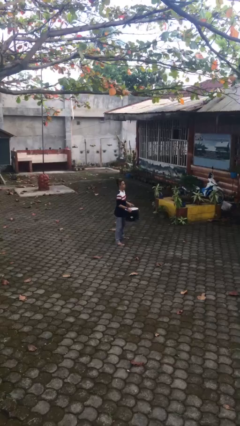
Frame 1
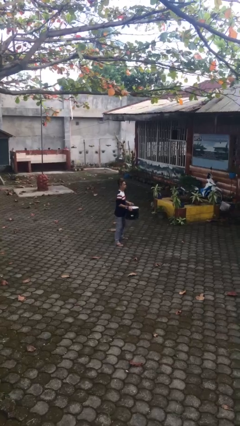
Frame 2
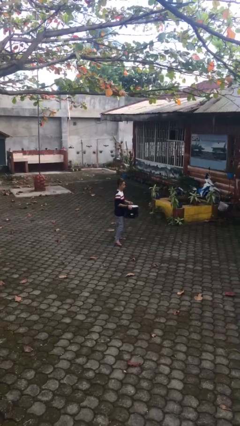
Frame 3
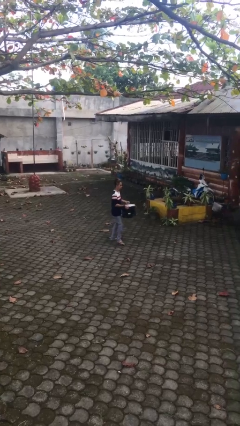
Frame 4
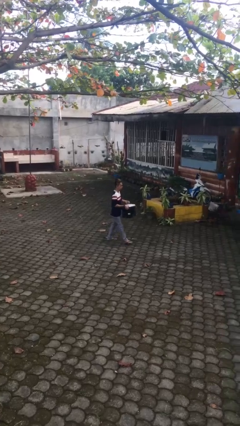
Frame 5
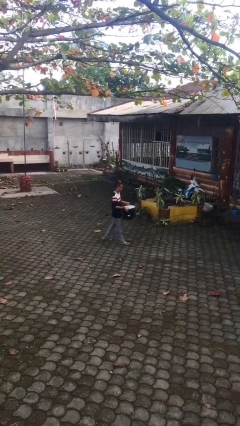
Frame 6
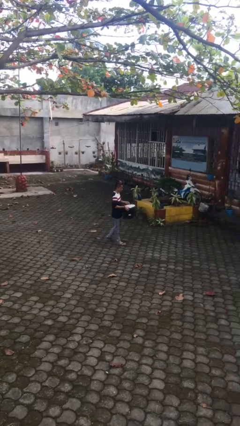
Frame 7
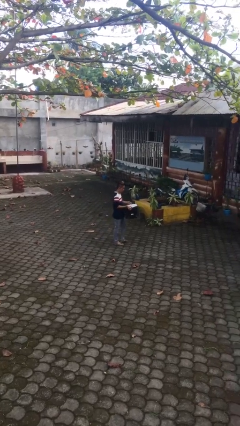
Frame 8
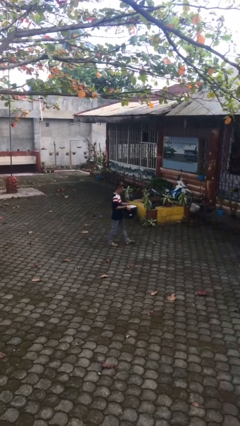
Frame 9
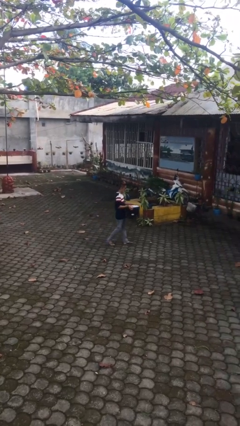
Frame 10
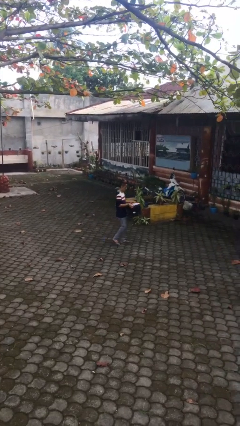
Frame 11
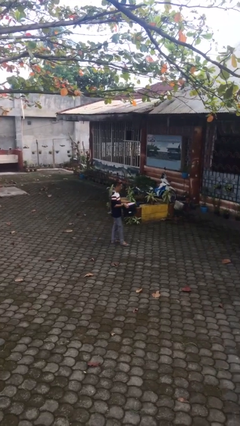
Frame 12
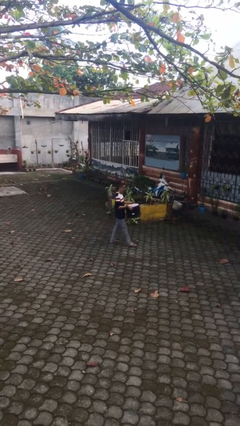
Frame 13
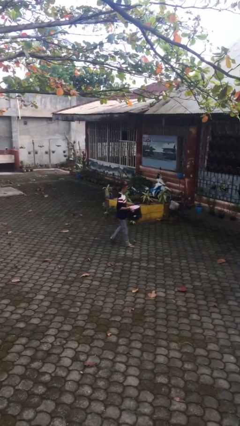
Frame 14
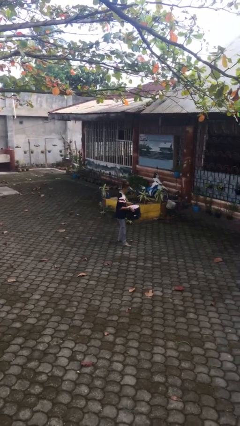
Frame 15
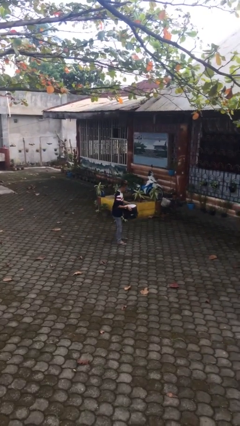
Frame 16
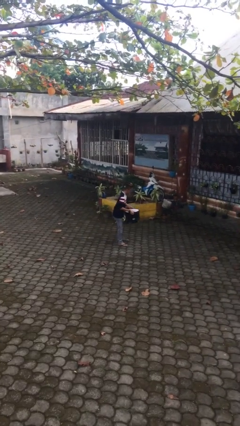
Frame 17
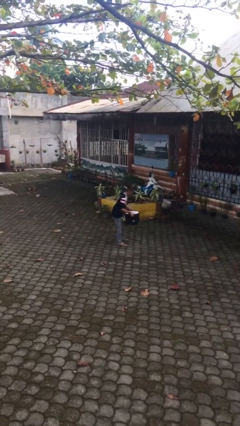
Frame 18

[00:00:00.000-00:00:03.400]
person carries heavy object

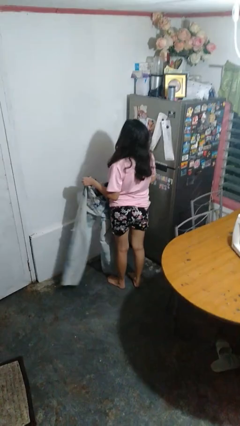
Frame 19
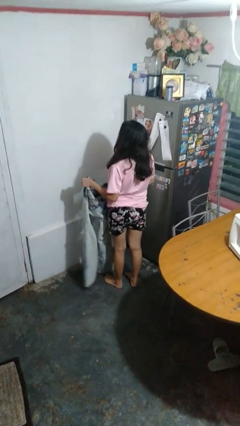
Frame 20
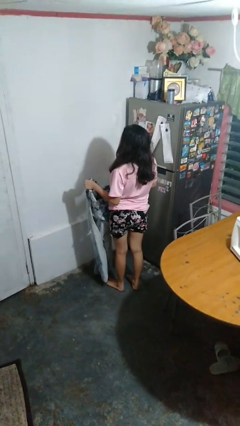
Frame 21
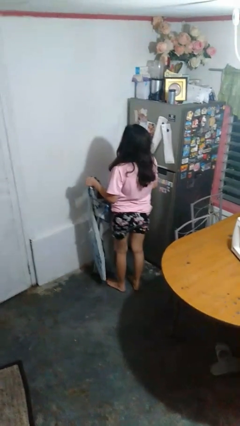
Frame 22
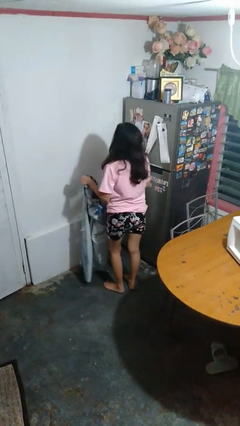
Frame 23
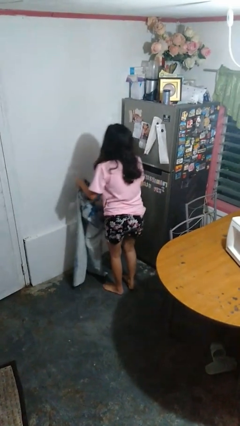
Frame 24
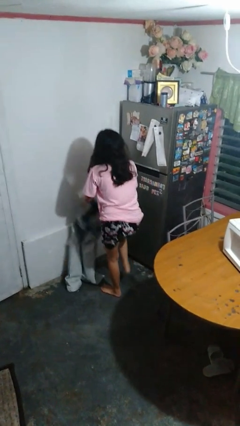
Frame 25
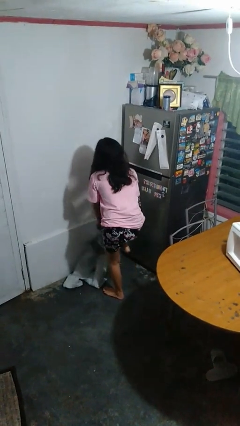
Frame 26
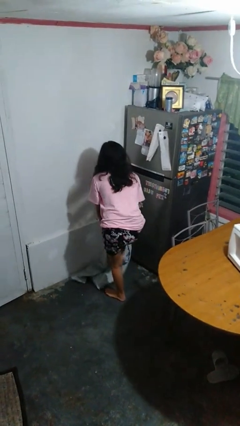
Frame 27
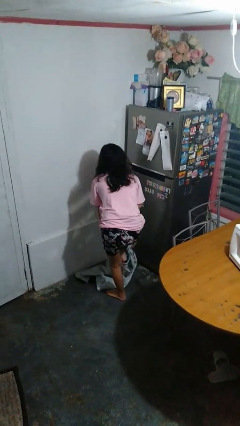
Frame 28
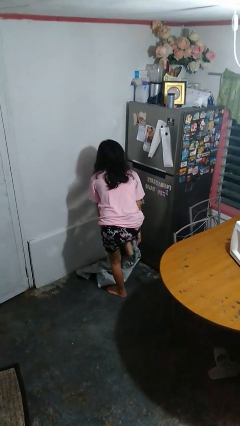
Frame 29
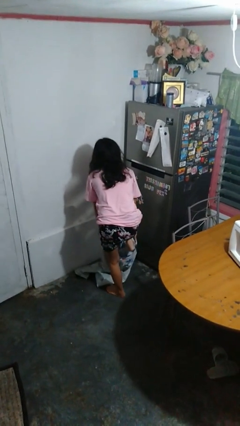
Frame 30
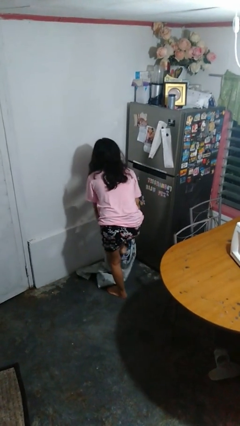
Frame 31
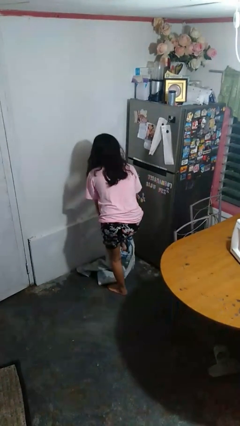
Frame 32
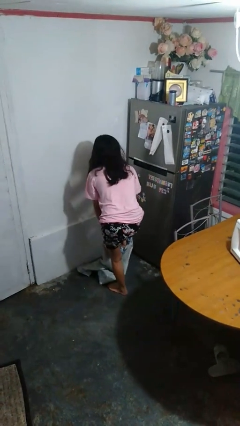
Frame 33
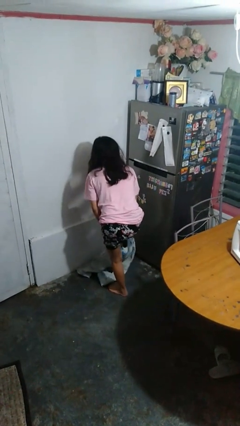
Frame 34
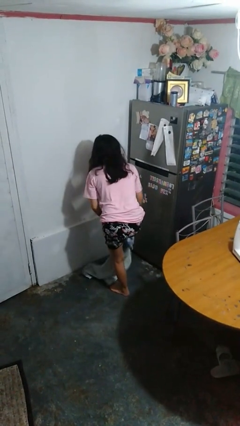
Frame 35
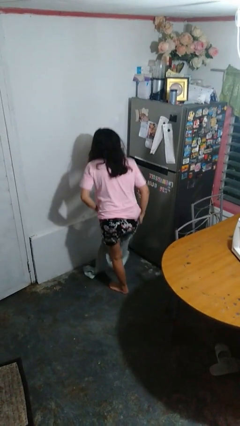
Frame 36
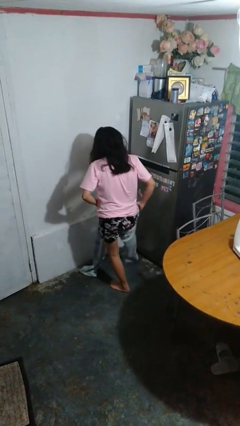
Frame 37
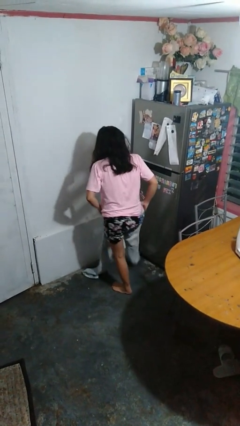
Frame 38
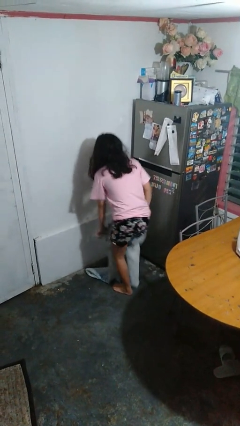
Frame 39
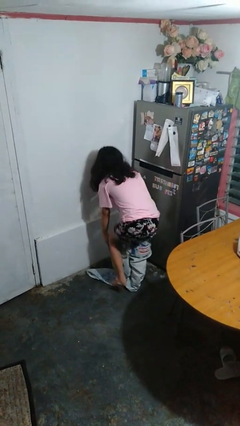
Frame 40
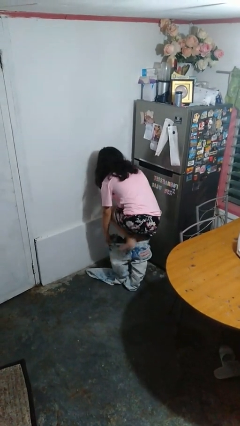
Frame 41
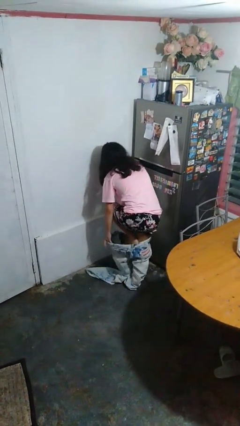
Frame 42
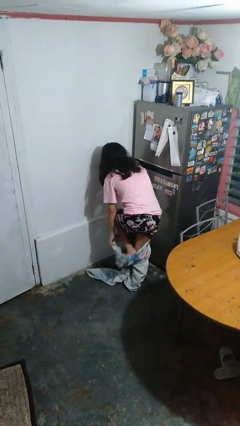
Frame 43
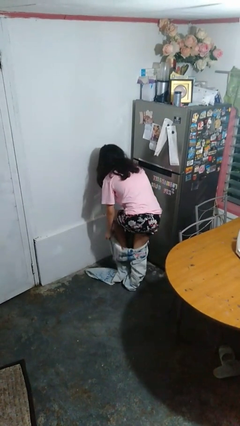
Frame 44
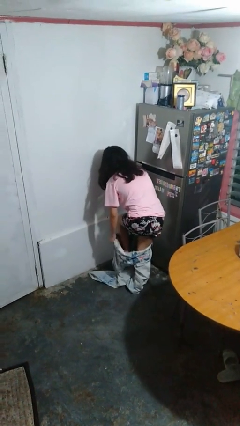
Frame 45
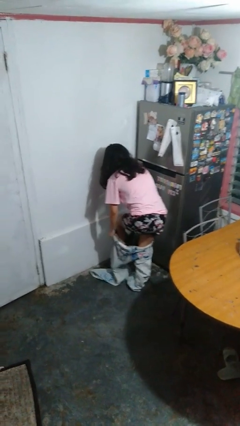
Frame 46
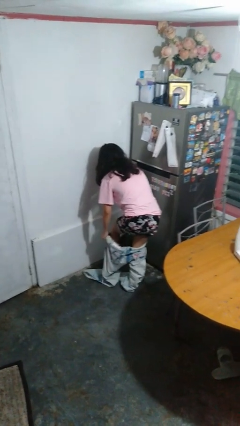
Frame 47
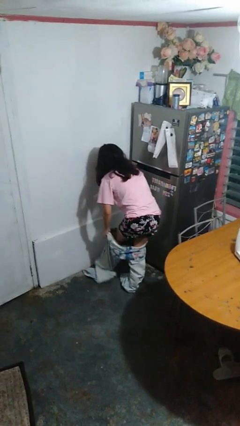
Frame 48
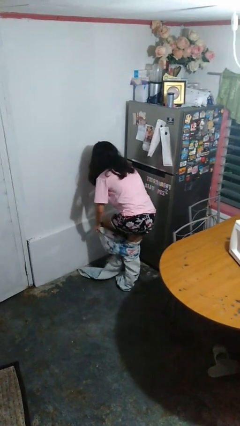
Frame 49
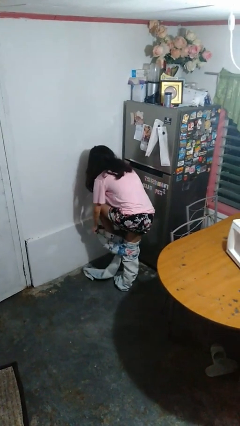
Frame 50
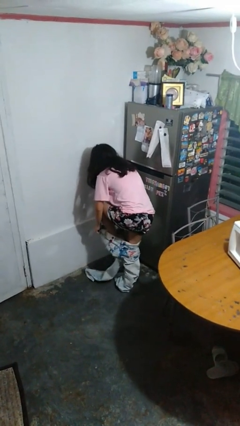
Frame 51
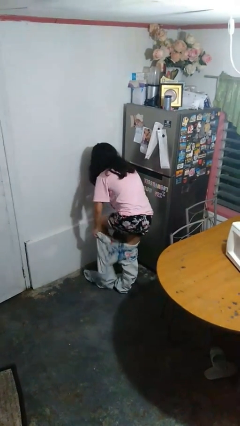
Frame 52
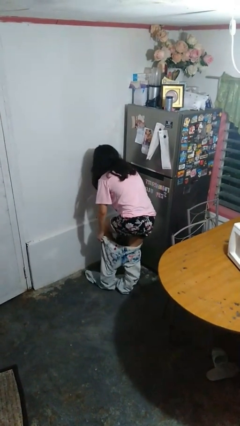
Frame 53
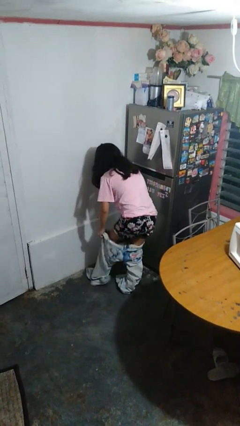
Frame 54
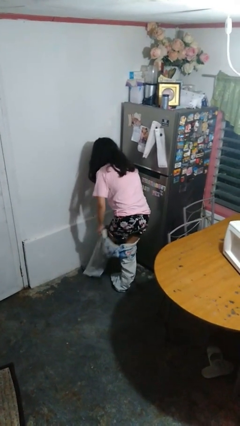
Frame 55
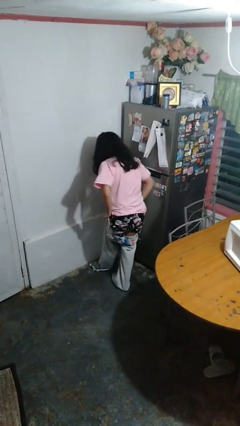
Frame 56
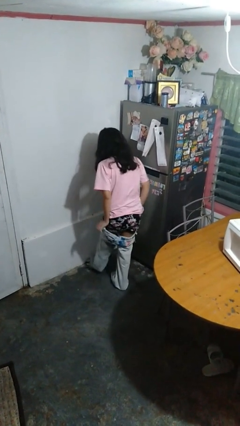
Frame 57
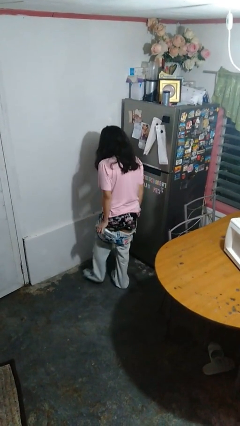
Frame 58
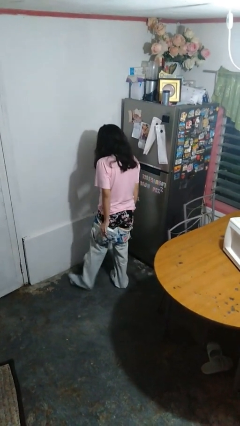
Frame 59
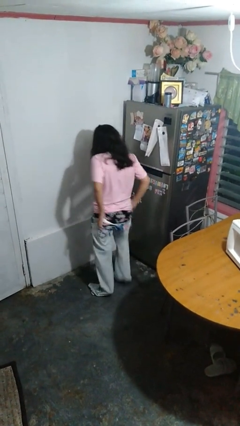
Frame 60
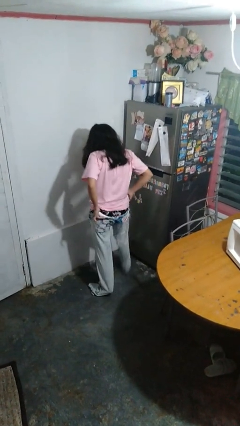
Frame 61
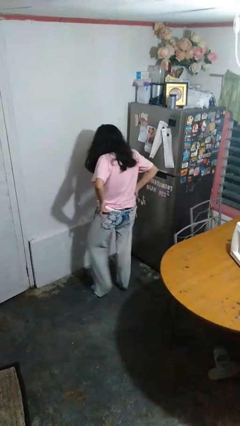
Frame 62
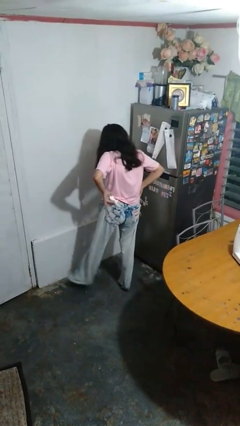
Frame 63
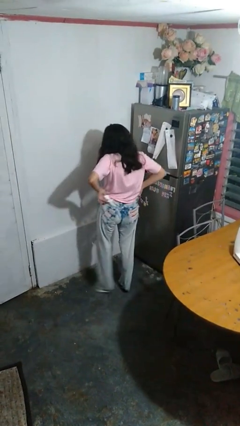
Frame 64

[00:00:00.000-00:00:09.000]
person puts on pants

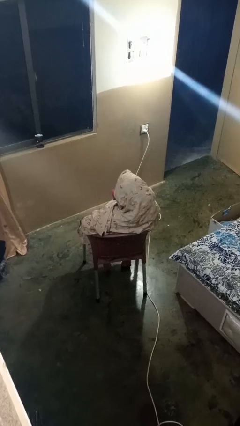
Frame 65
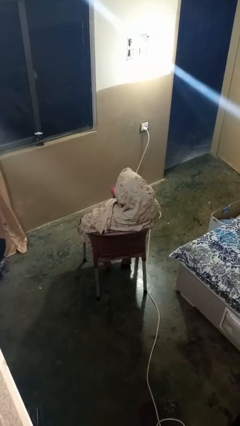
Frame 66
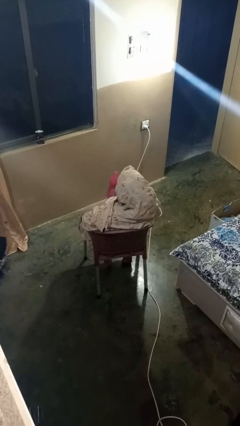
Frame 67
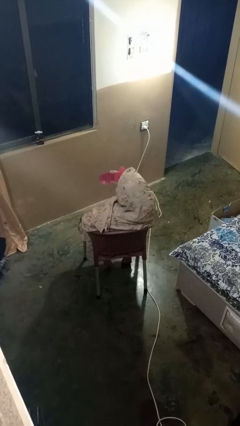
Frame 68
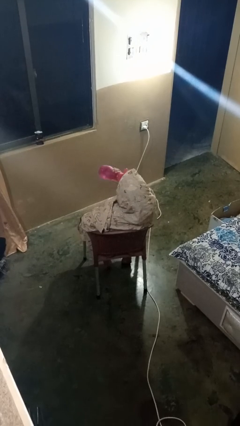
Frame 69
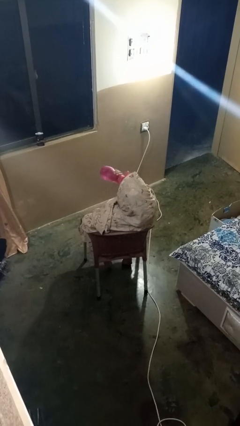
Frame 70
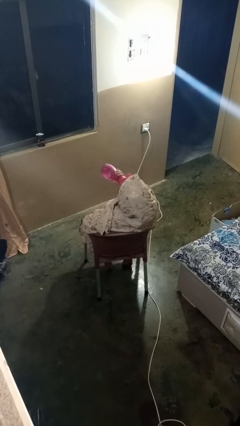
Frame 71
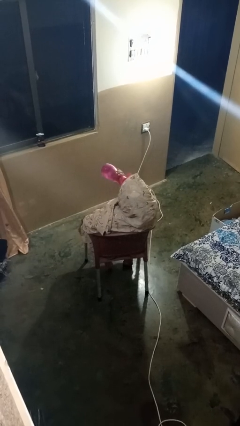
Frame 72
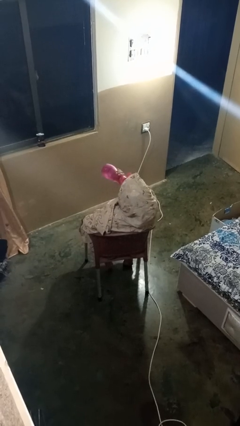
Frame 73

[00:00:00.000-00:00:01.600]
person drinks from bottle

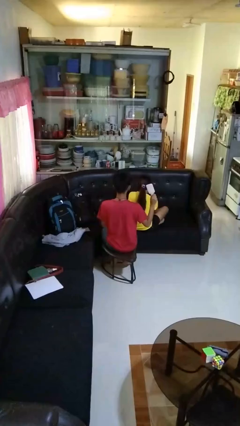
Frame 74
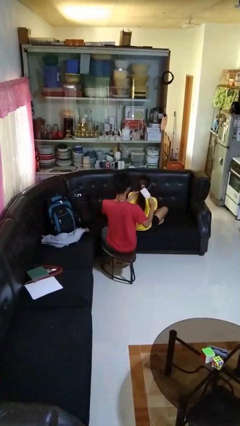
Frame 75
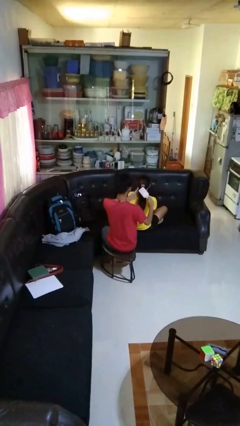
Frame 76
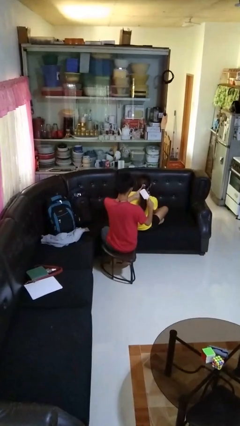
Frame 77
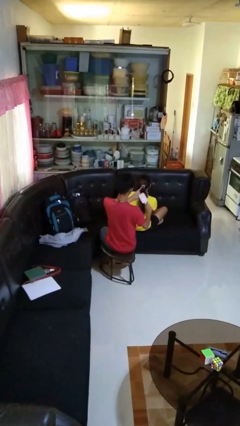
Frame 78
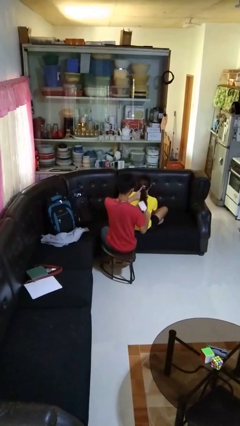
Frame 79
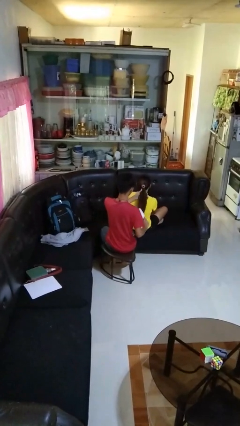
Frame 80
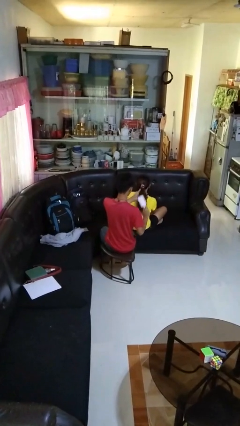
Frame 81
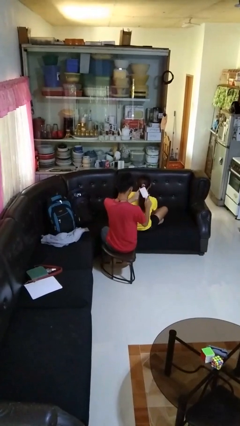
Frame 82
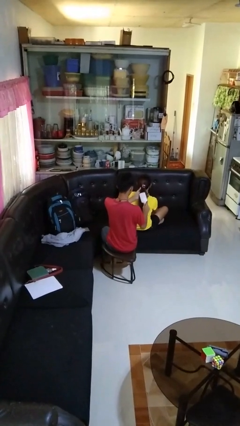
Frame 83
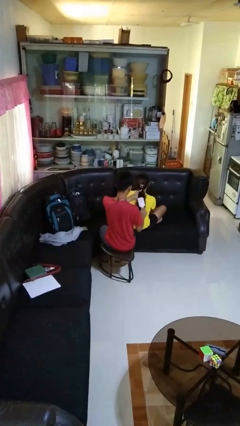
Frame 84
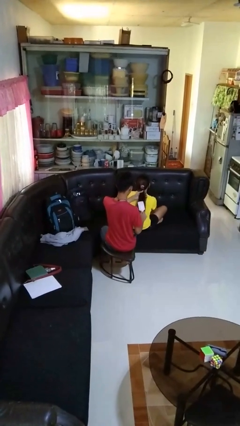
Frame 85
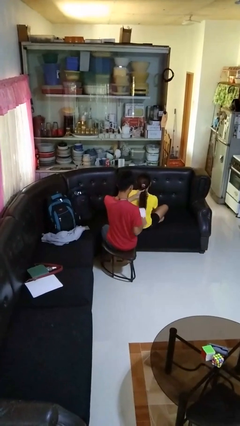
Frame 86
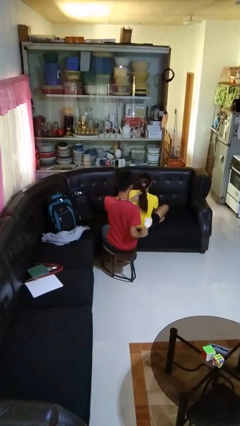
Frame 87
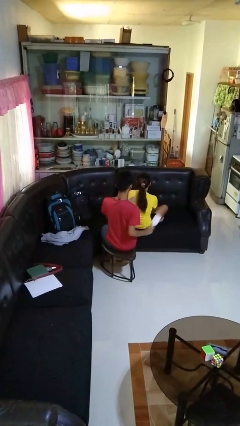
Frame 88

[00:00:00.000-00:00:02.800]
person brushes hair of person

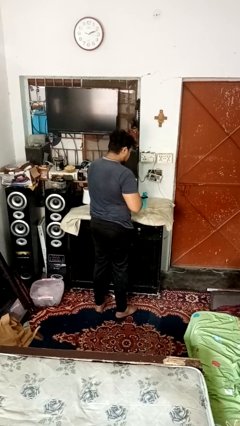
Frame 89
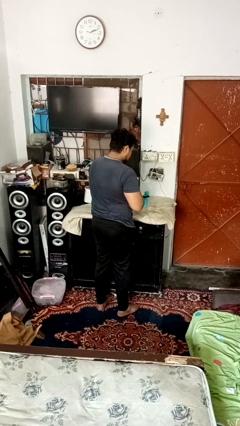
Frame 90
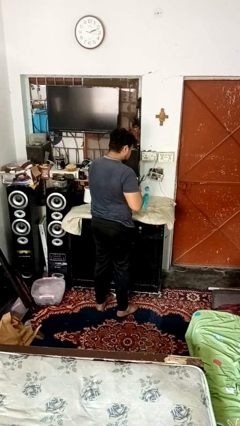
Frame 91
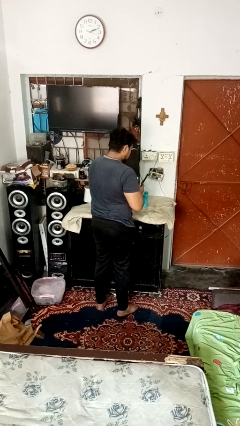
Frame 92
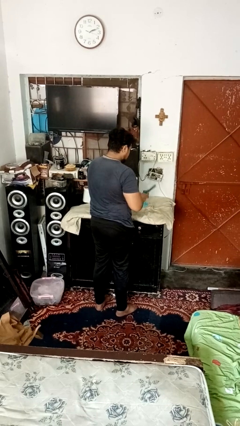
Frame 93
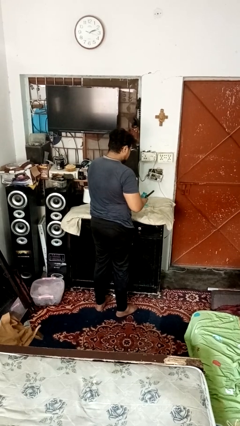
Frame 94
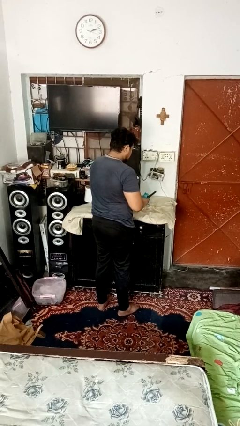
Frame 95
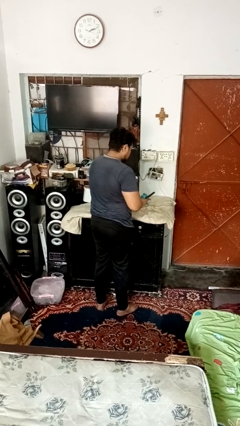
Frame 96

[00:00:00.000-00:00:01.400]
person opens can with can opener
